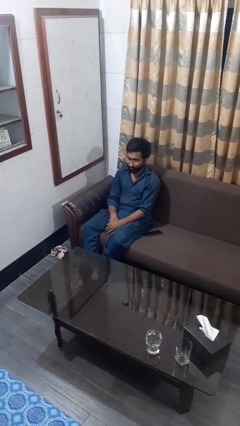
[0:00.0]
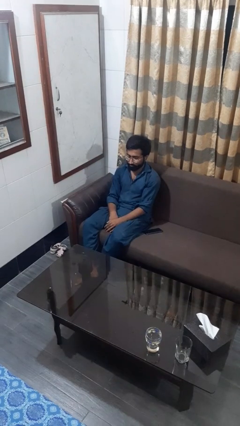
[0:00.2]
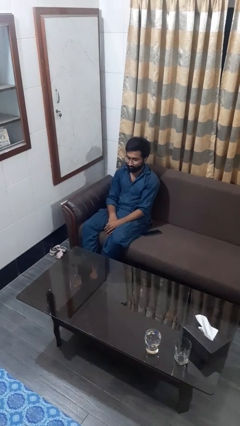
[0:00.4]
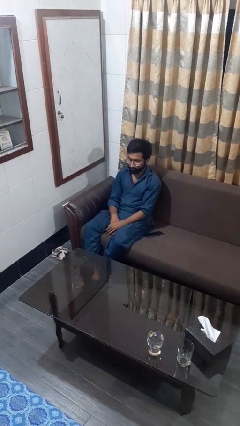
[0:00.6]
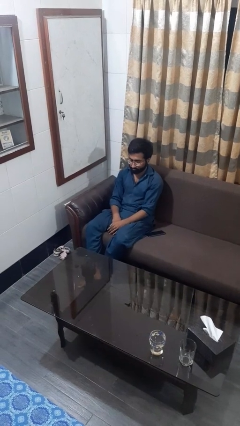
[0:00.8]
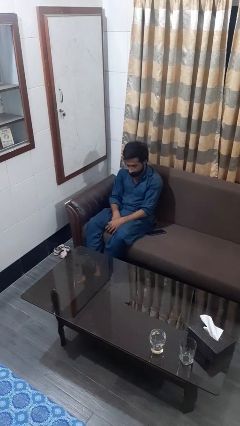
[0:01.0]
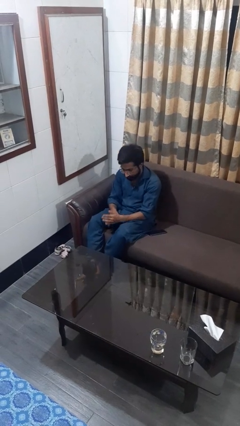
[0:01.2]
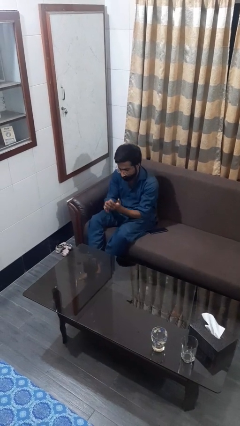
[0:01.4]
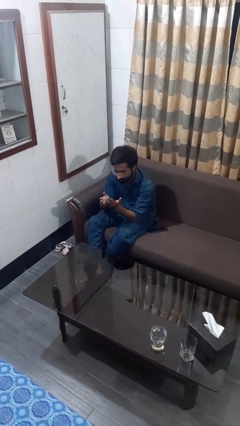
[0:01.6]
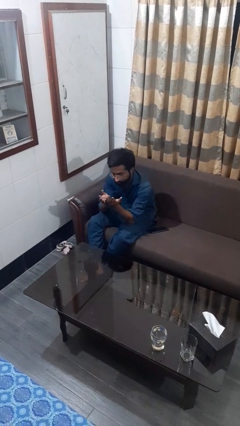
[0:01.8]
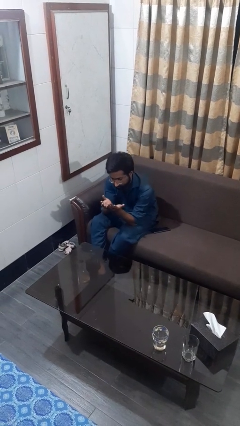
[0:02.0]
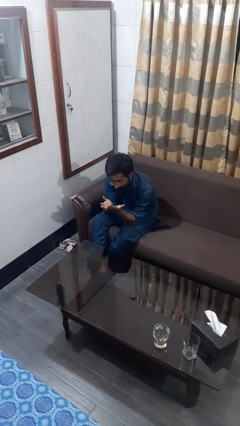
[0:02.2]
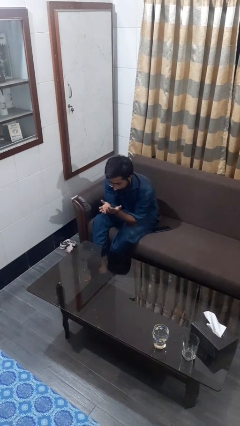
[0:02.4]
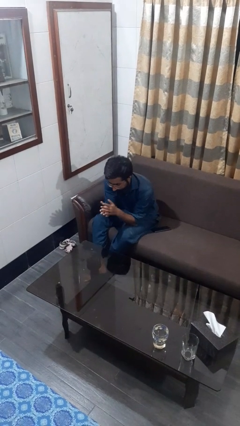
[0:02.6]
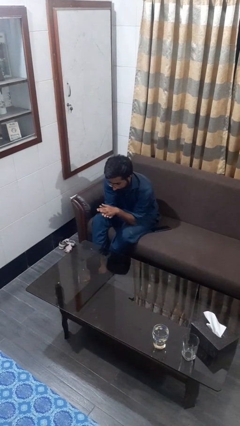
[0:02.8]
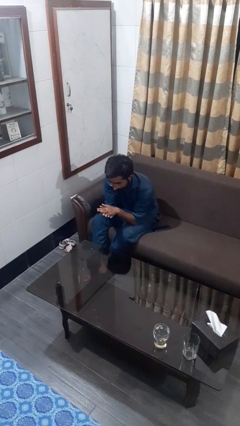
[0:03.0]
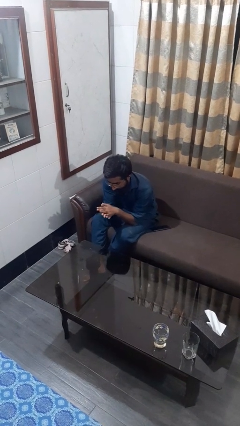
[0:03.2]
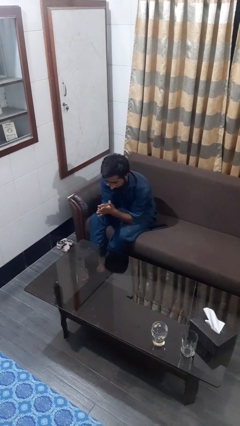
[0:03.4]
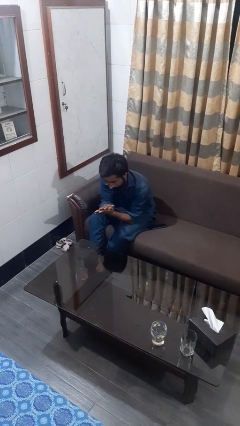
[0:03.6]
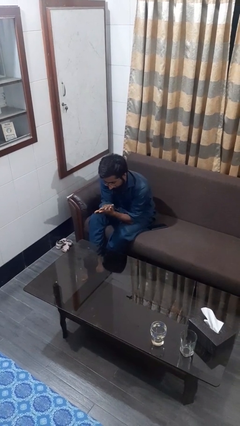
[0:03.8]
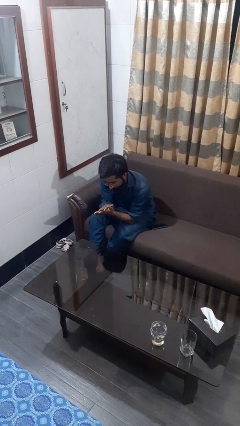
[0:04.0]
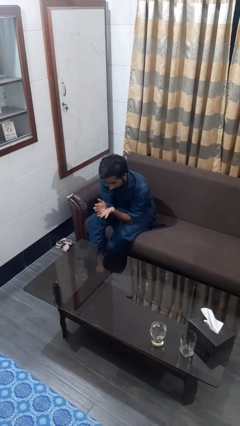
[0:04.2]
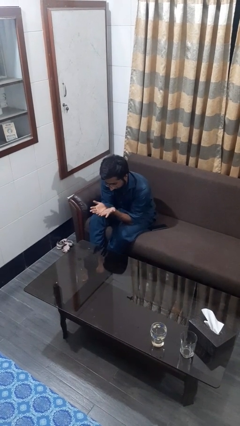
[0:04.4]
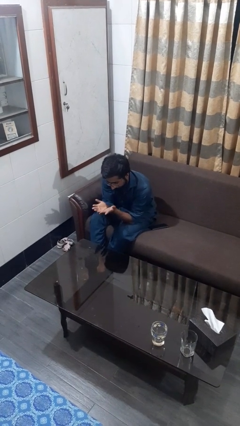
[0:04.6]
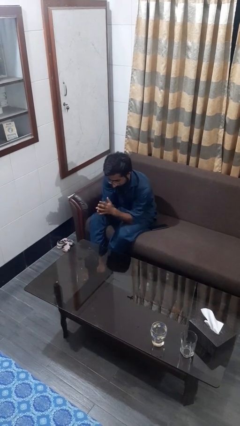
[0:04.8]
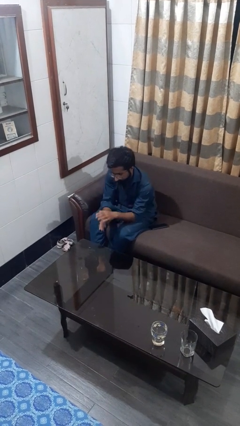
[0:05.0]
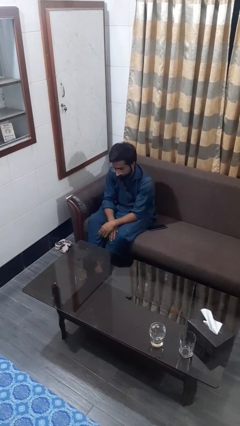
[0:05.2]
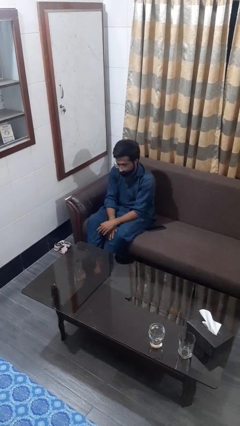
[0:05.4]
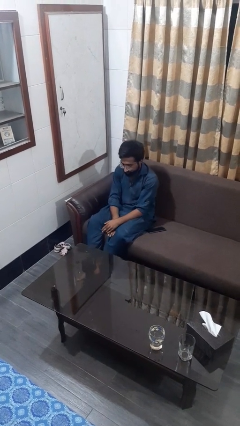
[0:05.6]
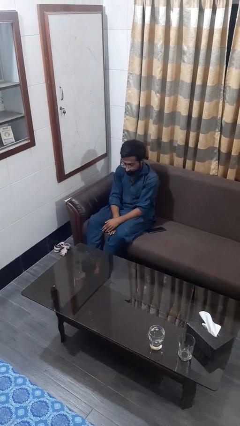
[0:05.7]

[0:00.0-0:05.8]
person looks at hands in lap

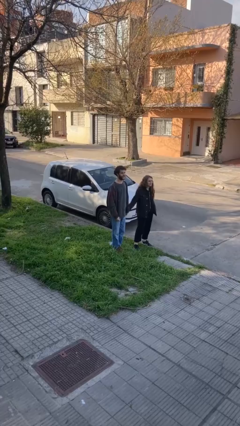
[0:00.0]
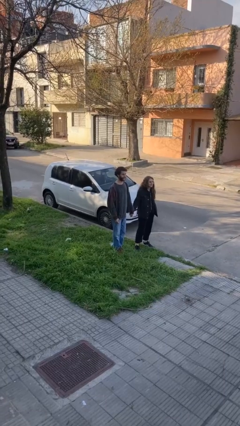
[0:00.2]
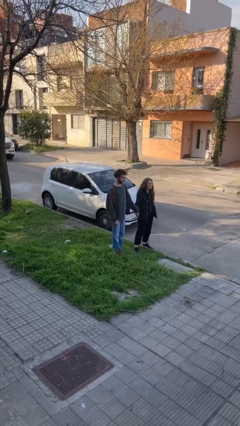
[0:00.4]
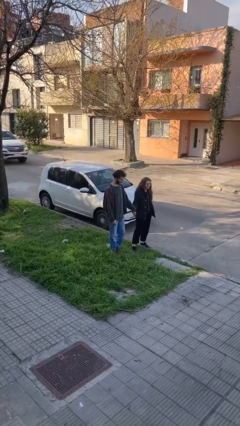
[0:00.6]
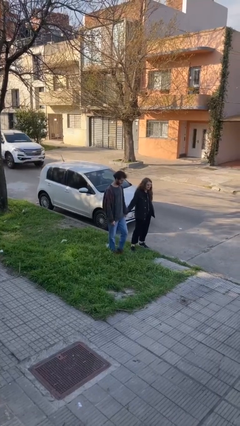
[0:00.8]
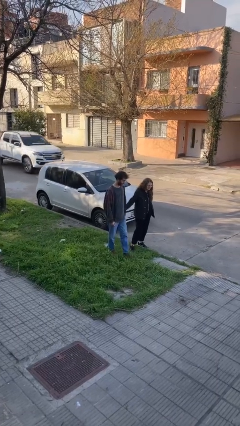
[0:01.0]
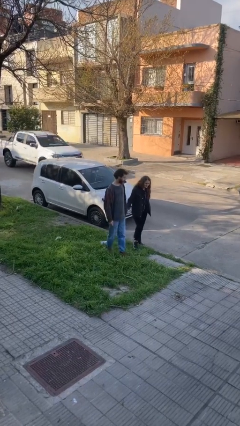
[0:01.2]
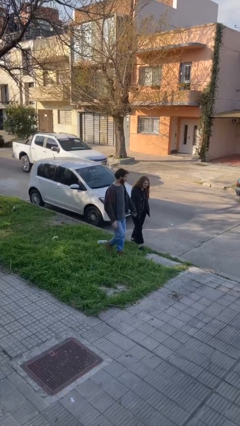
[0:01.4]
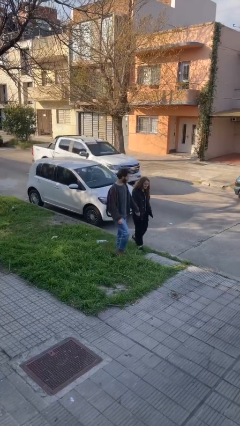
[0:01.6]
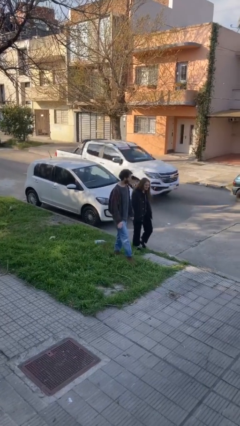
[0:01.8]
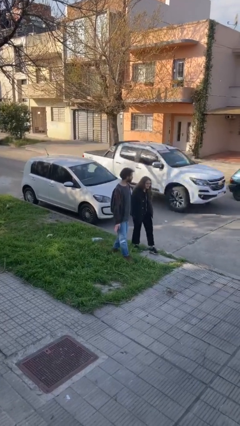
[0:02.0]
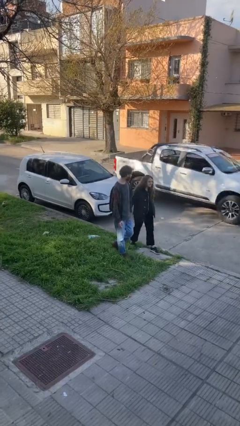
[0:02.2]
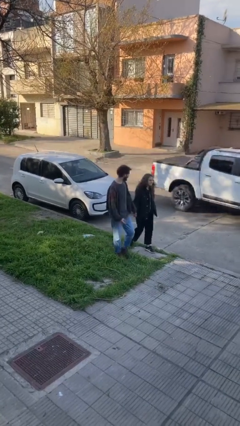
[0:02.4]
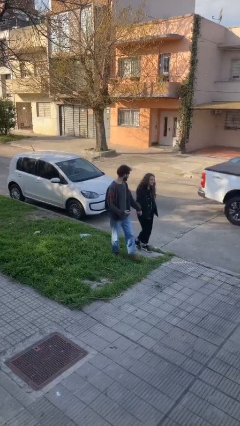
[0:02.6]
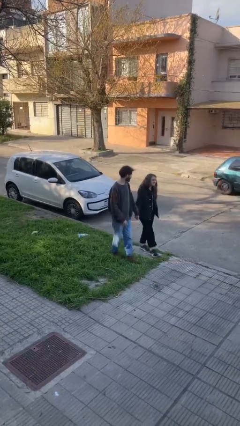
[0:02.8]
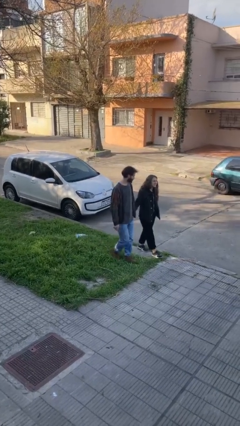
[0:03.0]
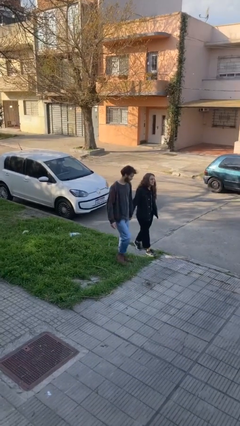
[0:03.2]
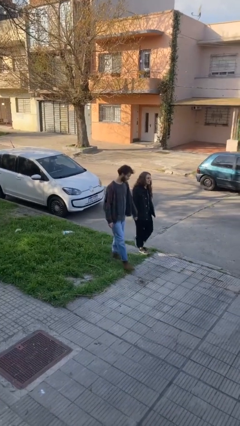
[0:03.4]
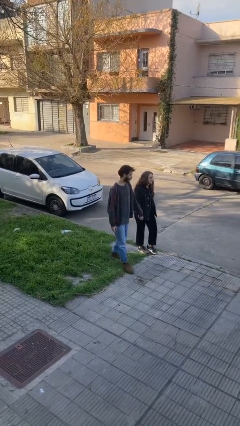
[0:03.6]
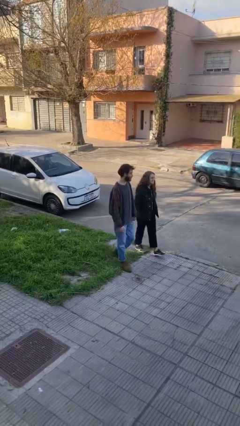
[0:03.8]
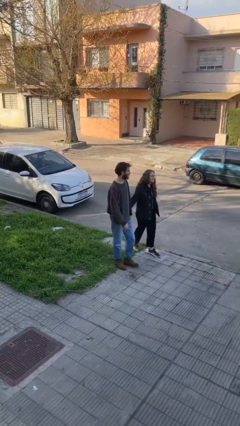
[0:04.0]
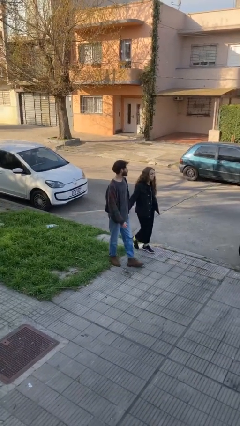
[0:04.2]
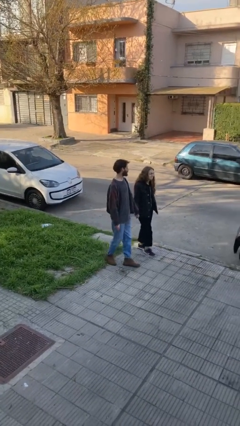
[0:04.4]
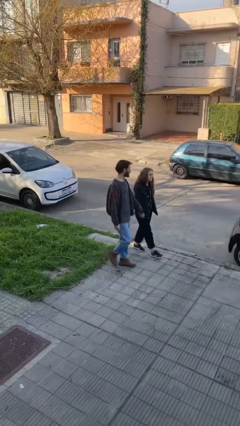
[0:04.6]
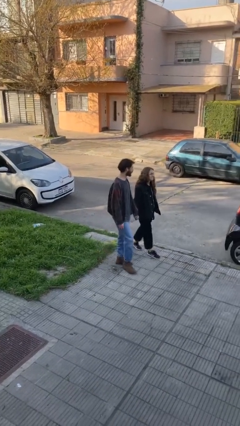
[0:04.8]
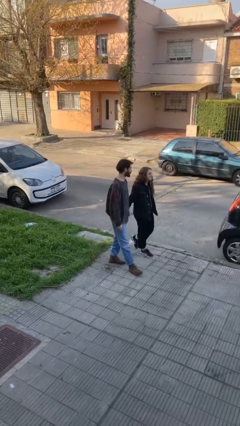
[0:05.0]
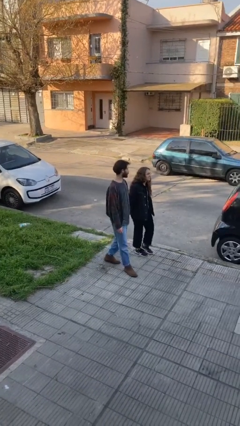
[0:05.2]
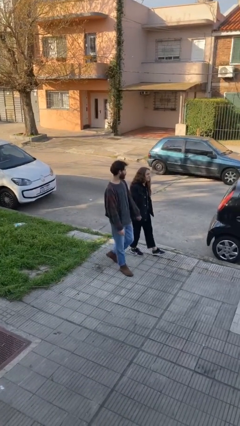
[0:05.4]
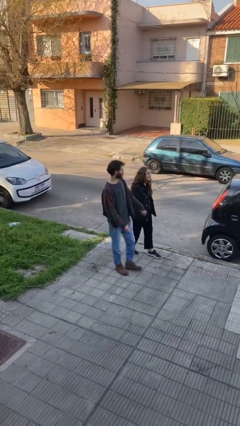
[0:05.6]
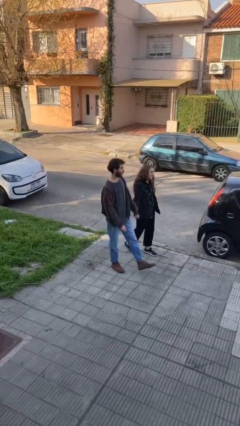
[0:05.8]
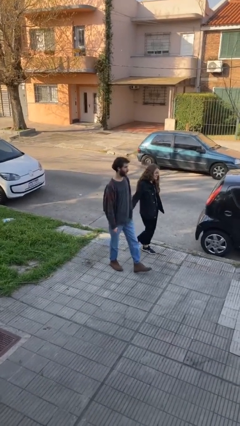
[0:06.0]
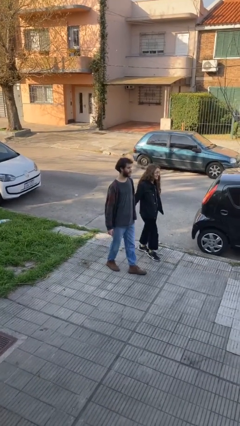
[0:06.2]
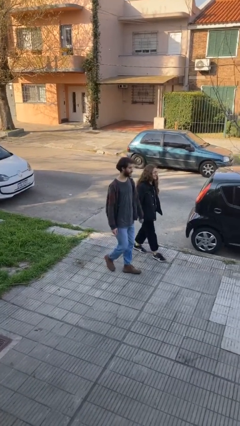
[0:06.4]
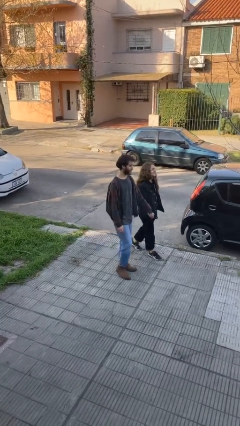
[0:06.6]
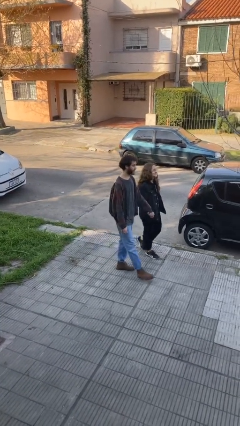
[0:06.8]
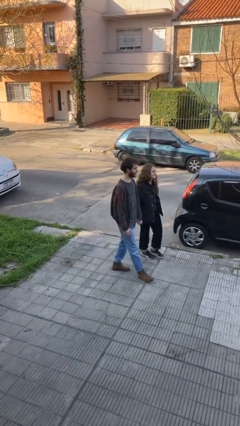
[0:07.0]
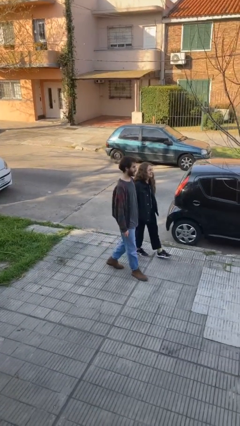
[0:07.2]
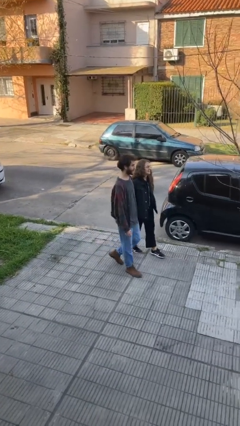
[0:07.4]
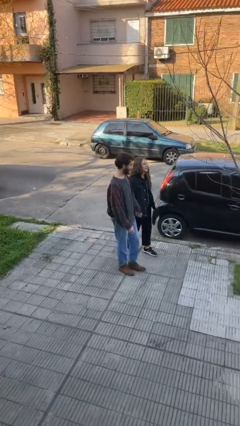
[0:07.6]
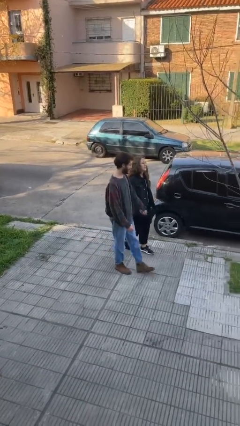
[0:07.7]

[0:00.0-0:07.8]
person holds hand

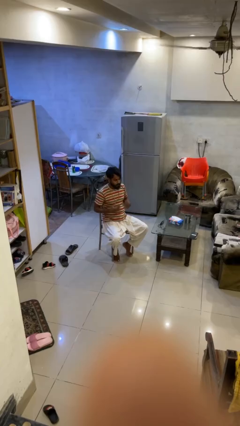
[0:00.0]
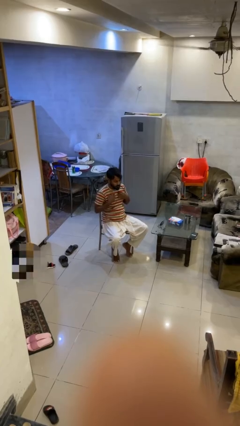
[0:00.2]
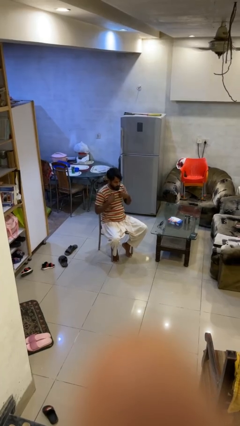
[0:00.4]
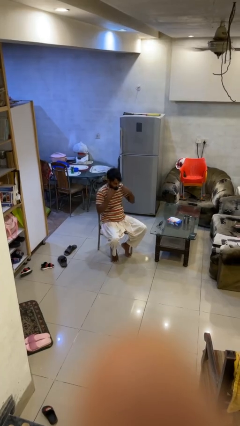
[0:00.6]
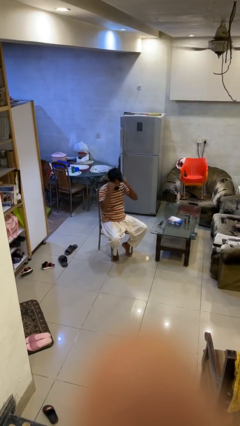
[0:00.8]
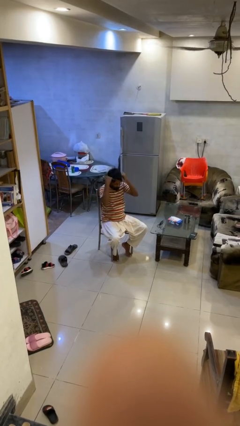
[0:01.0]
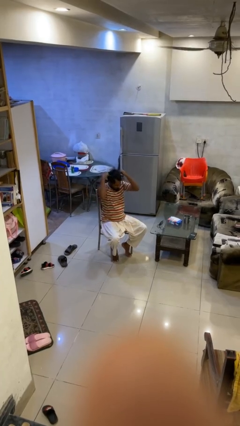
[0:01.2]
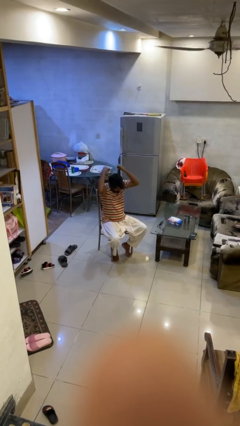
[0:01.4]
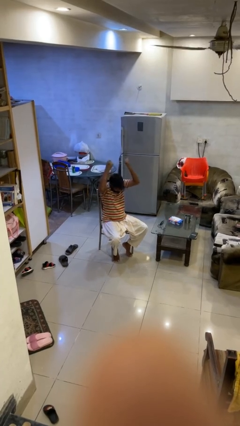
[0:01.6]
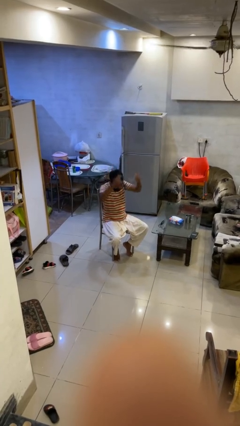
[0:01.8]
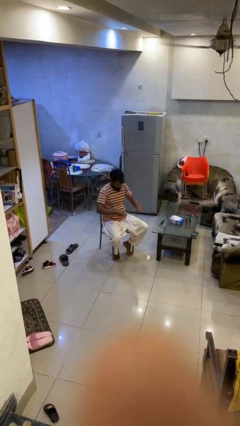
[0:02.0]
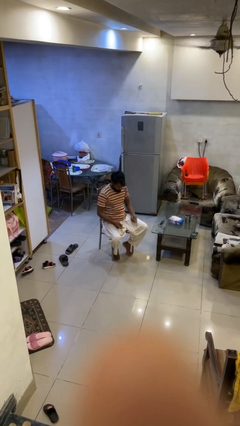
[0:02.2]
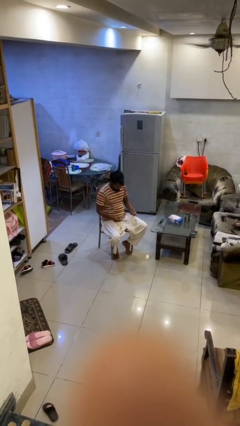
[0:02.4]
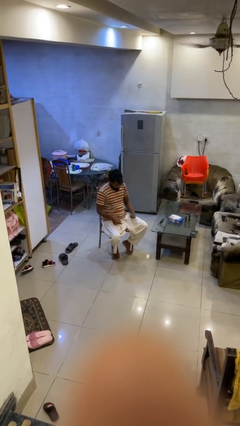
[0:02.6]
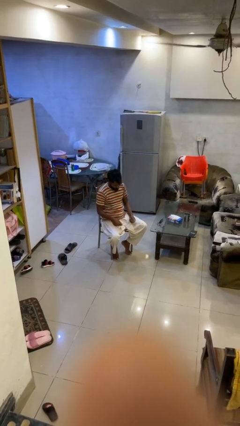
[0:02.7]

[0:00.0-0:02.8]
person takes off necklace

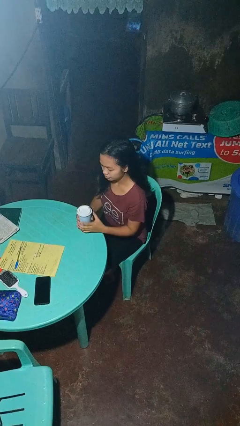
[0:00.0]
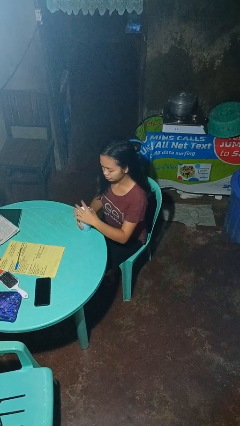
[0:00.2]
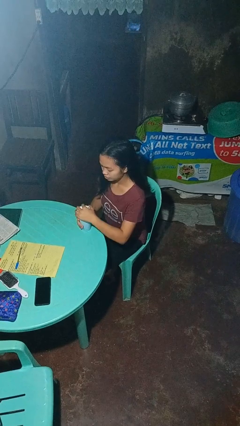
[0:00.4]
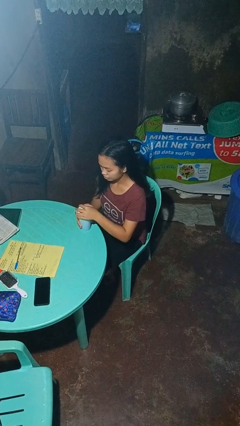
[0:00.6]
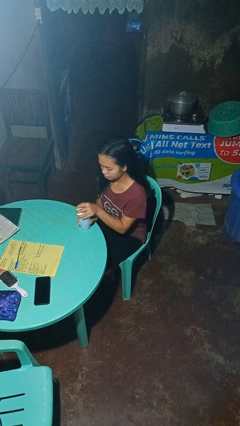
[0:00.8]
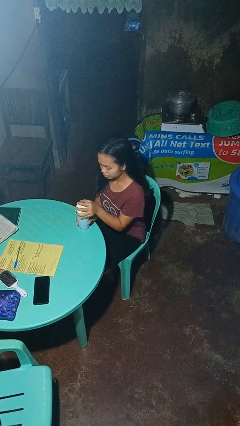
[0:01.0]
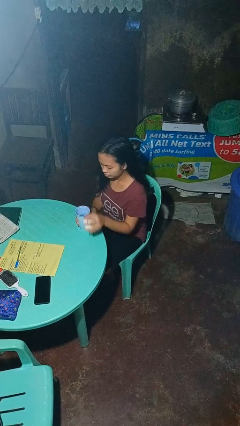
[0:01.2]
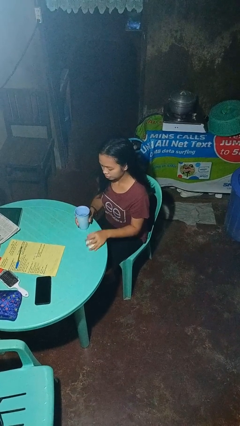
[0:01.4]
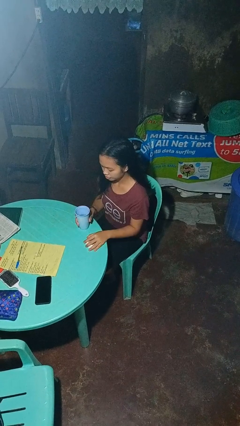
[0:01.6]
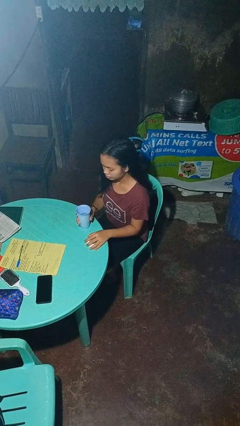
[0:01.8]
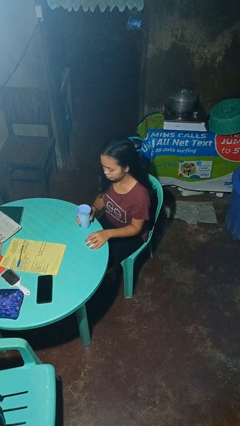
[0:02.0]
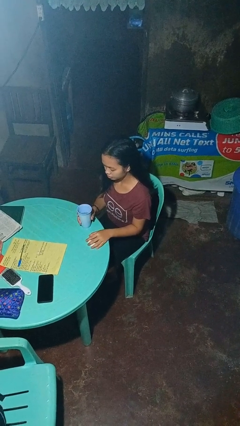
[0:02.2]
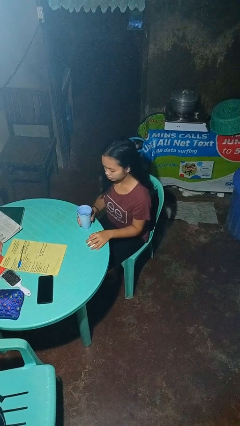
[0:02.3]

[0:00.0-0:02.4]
person unscrews lid from bottle
